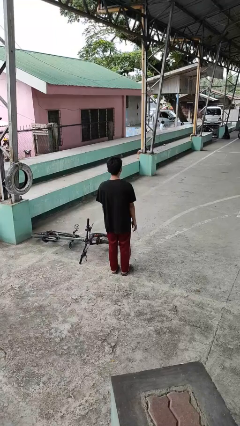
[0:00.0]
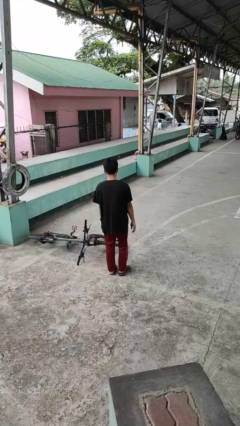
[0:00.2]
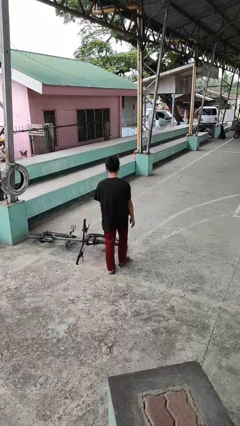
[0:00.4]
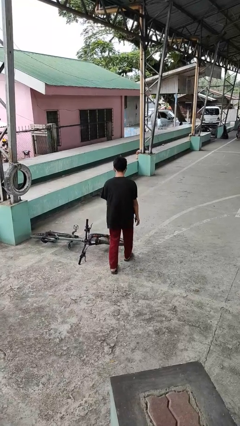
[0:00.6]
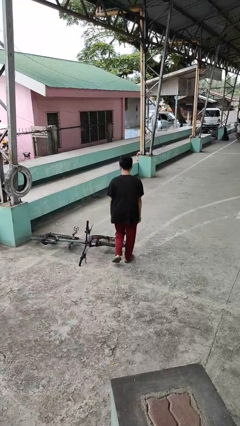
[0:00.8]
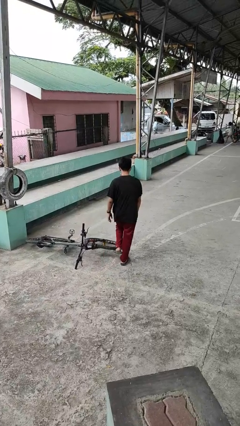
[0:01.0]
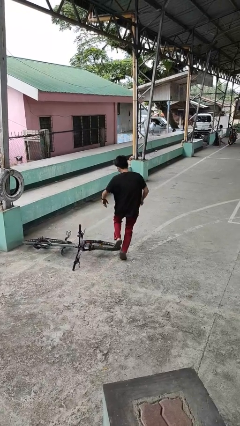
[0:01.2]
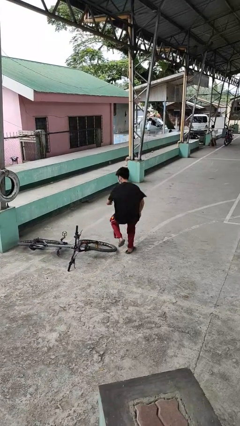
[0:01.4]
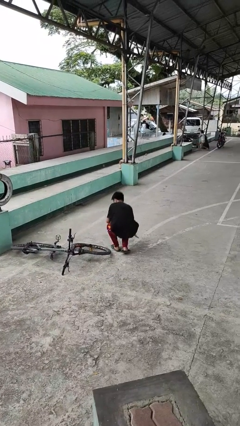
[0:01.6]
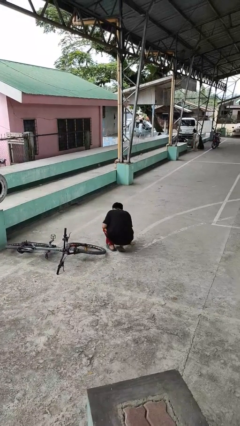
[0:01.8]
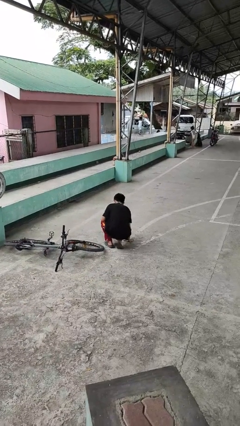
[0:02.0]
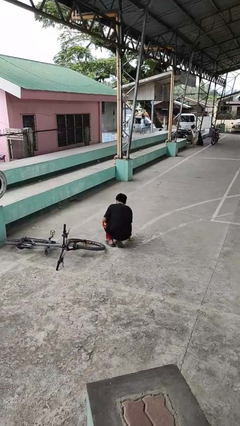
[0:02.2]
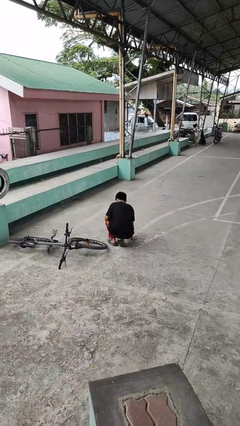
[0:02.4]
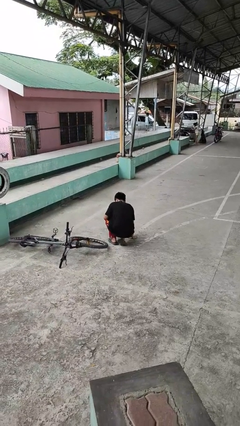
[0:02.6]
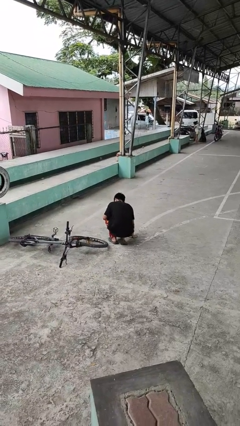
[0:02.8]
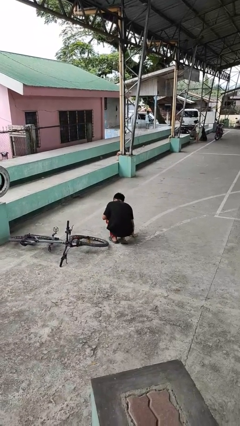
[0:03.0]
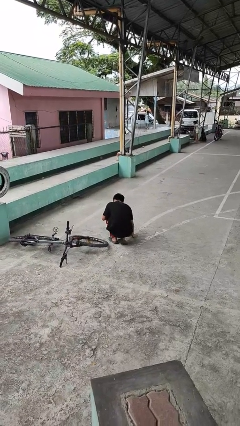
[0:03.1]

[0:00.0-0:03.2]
person trips on object on floor

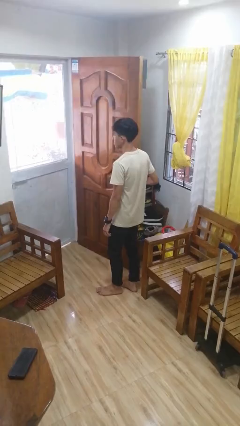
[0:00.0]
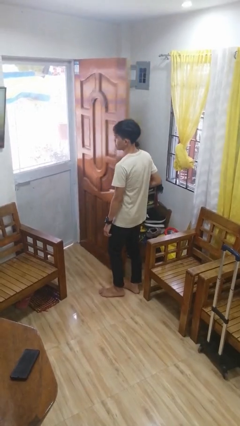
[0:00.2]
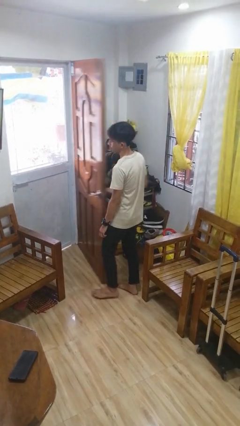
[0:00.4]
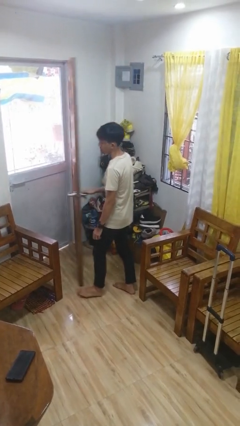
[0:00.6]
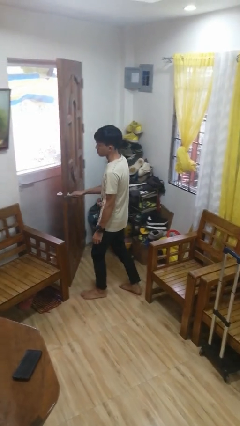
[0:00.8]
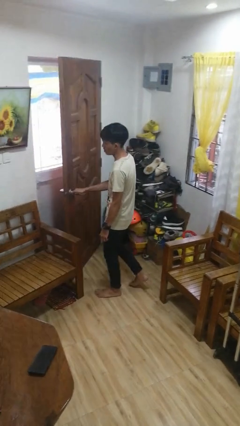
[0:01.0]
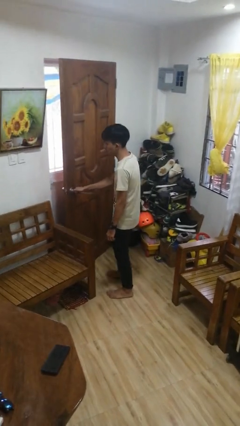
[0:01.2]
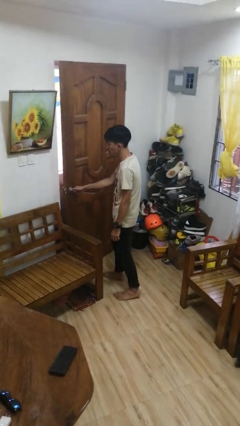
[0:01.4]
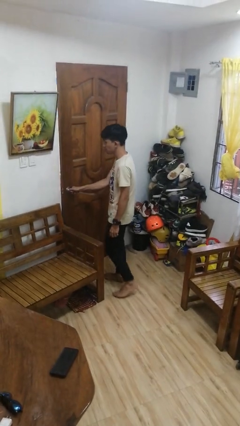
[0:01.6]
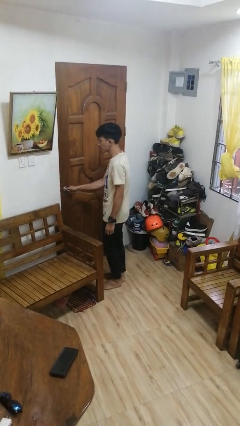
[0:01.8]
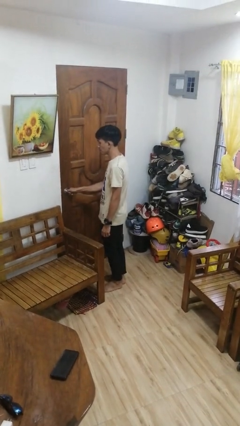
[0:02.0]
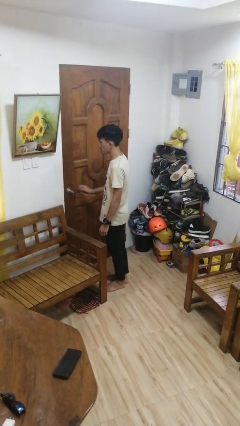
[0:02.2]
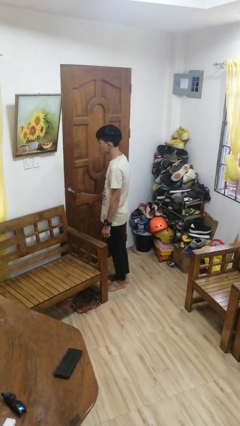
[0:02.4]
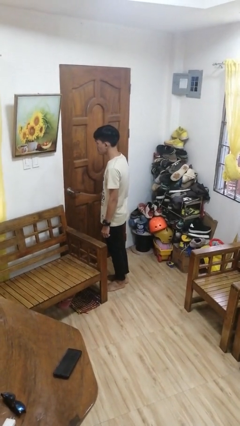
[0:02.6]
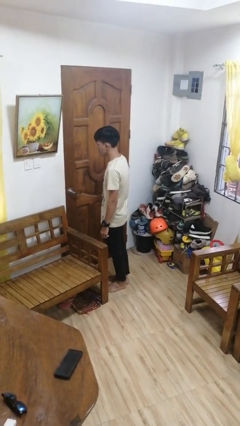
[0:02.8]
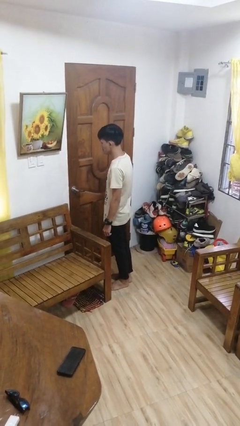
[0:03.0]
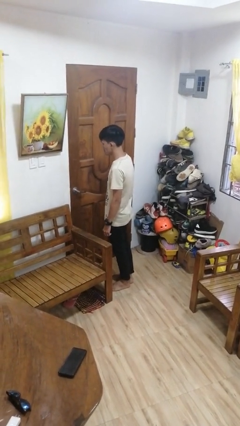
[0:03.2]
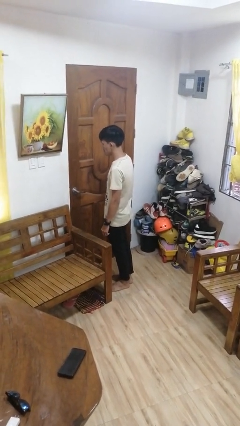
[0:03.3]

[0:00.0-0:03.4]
person closes facility door

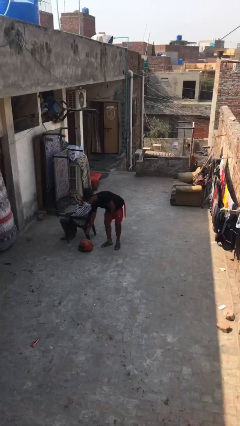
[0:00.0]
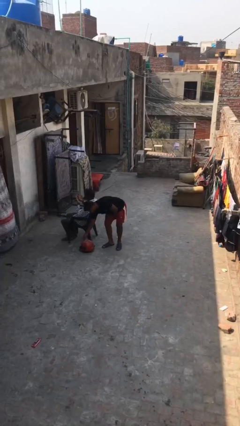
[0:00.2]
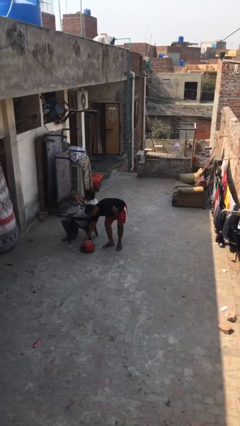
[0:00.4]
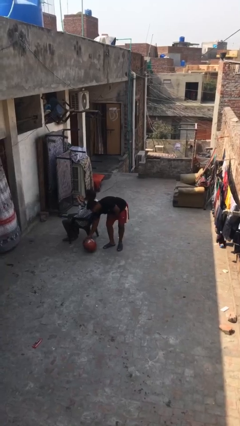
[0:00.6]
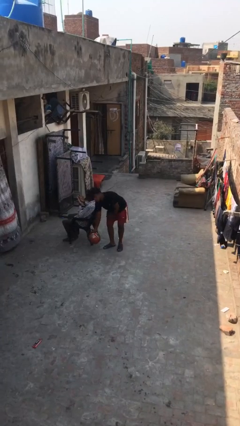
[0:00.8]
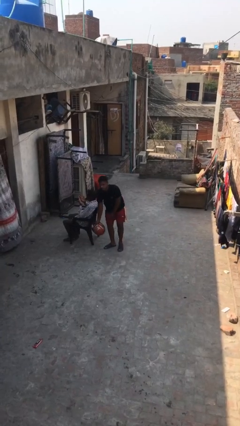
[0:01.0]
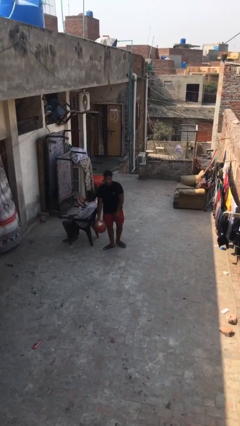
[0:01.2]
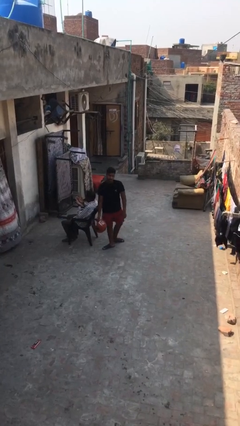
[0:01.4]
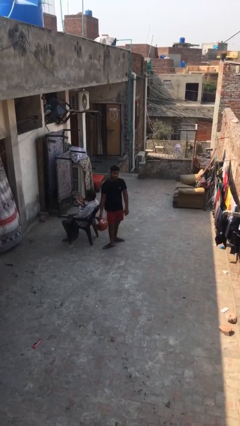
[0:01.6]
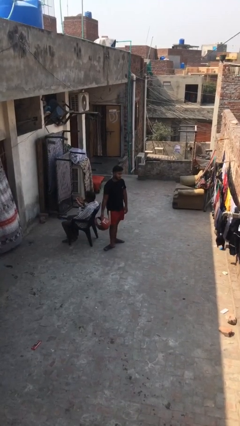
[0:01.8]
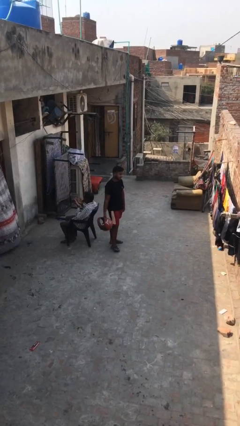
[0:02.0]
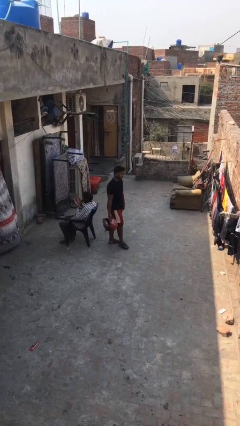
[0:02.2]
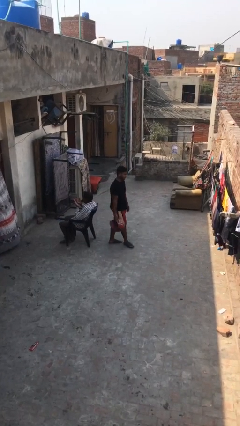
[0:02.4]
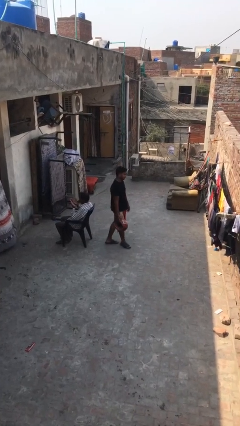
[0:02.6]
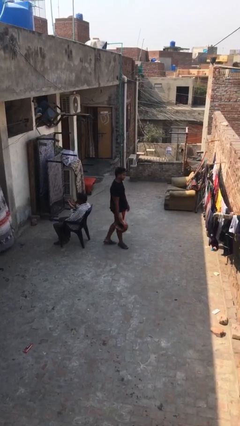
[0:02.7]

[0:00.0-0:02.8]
person steals object from person

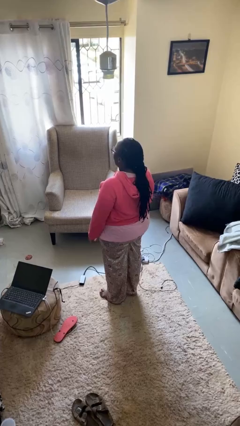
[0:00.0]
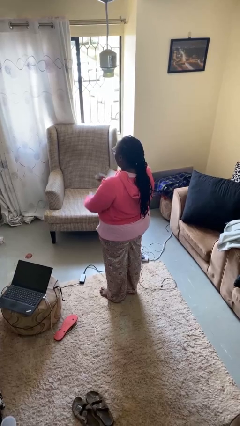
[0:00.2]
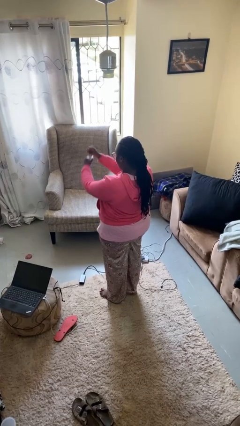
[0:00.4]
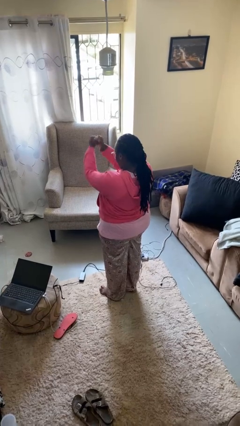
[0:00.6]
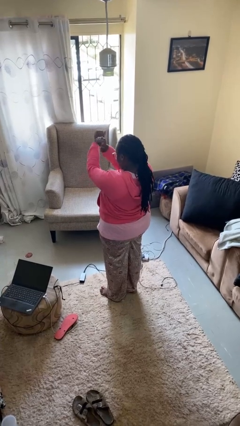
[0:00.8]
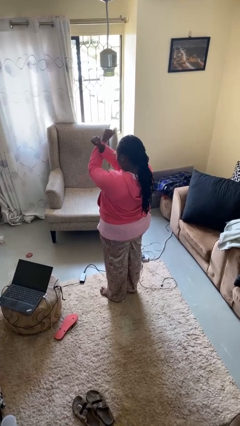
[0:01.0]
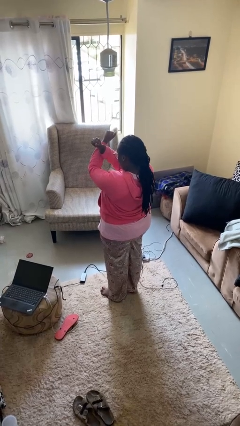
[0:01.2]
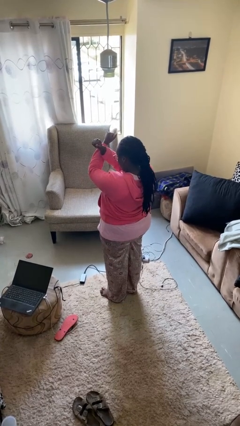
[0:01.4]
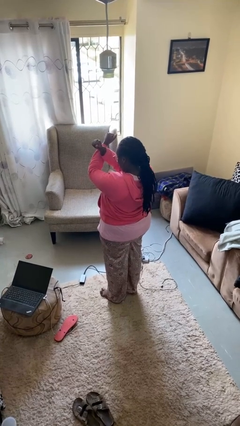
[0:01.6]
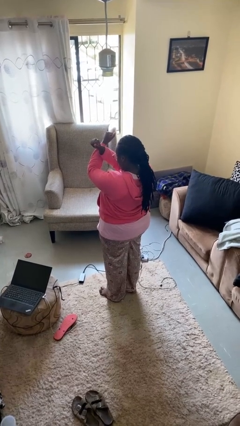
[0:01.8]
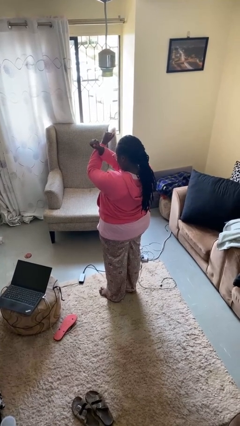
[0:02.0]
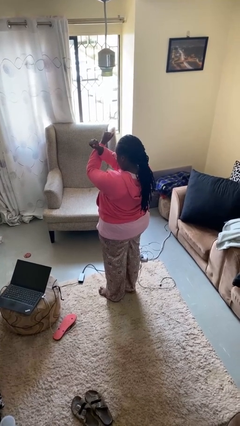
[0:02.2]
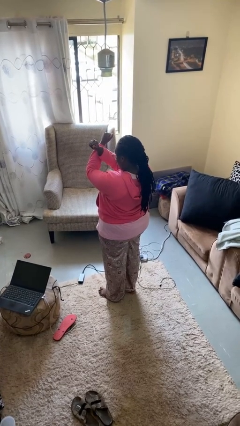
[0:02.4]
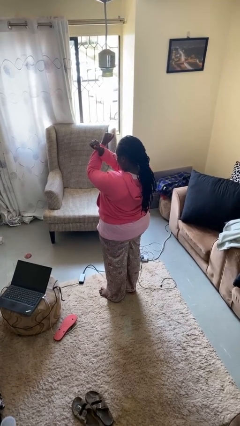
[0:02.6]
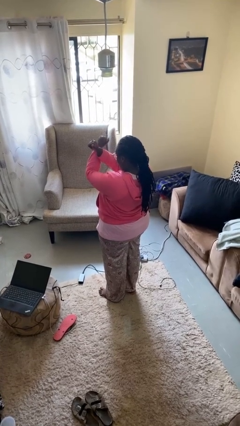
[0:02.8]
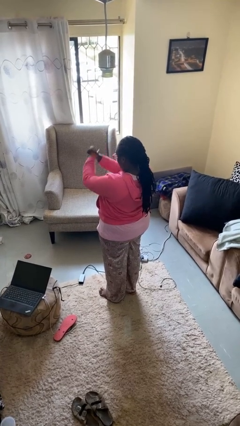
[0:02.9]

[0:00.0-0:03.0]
person gestures arms x

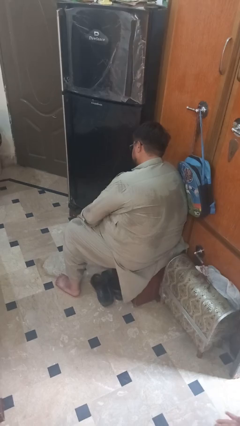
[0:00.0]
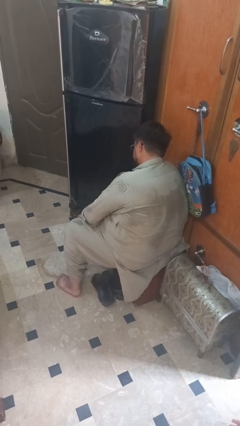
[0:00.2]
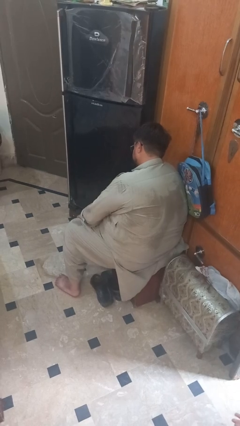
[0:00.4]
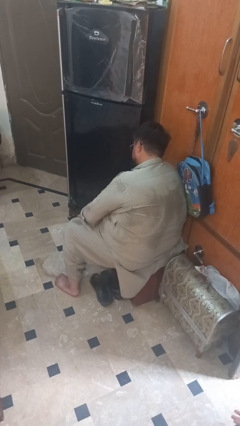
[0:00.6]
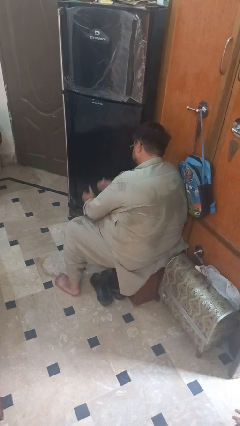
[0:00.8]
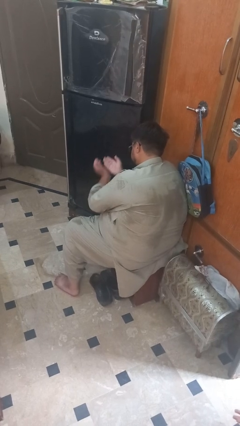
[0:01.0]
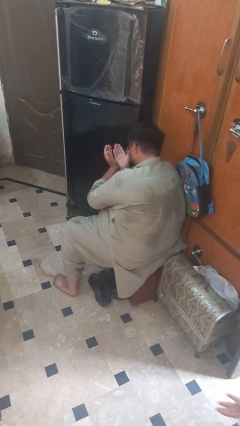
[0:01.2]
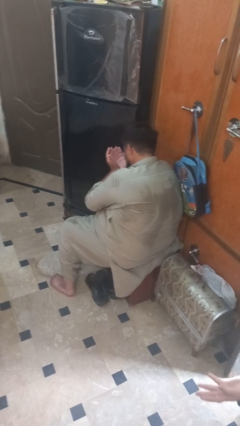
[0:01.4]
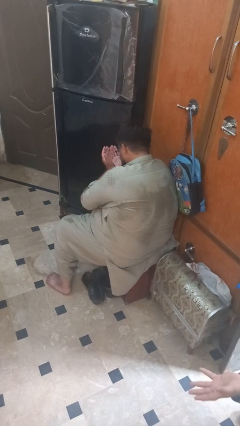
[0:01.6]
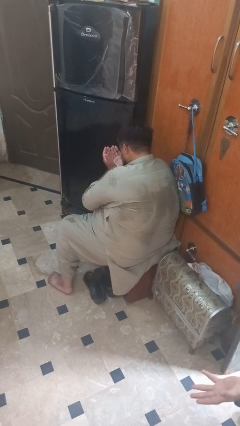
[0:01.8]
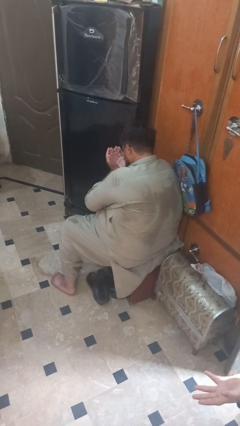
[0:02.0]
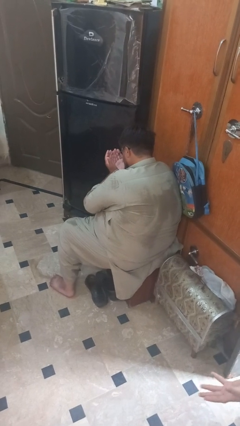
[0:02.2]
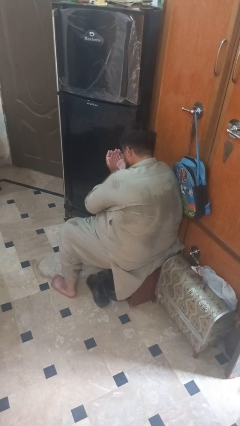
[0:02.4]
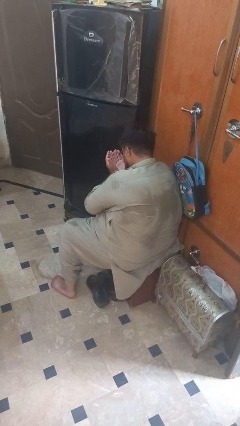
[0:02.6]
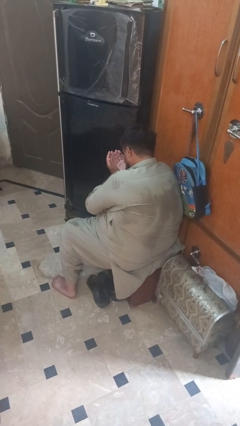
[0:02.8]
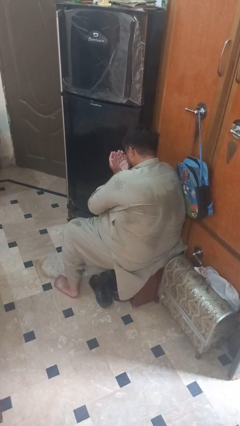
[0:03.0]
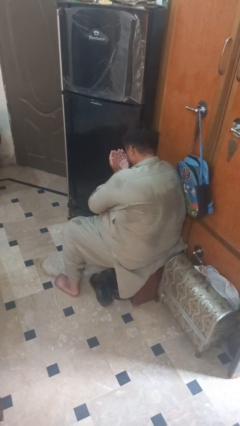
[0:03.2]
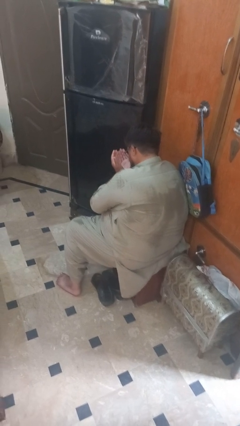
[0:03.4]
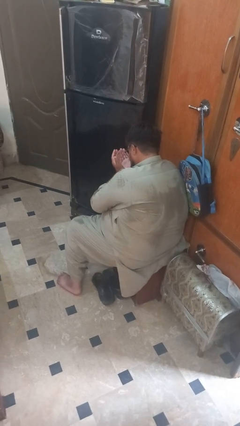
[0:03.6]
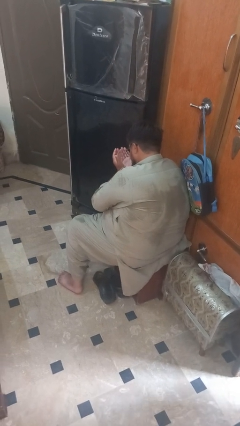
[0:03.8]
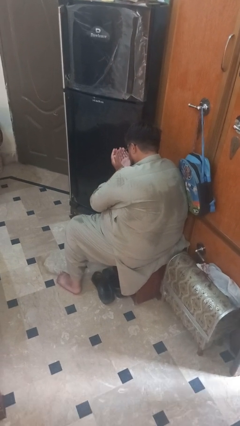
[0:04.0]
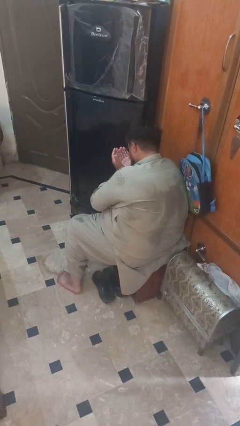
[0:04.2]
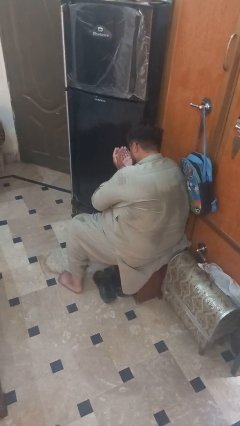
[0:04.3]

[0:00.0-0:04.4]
person prays

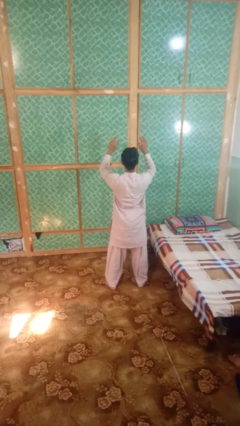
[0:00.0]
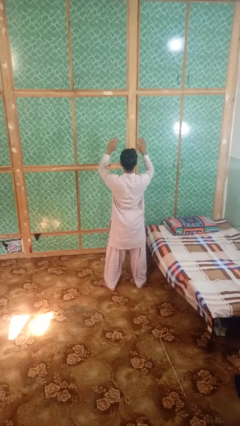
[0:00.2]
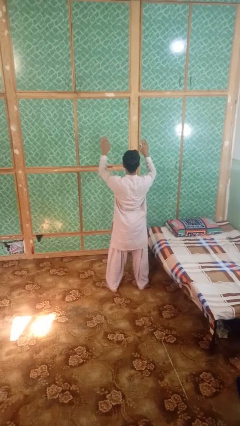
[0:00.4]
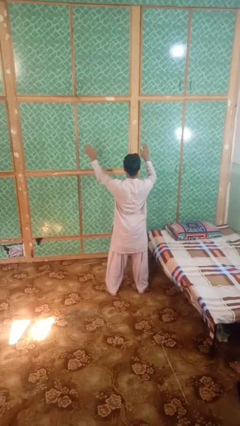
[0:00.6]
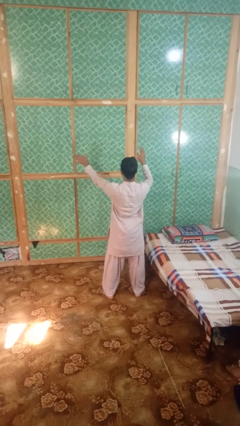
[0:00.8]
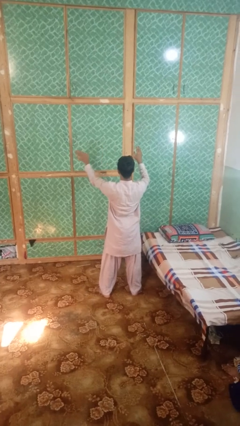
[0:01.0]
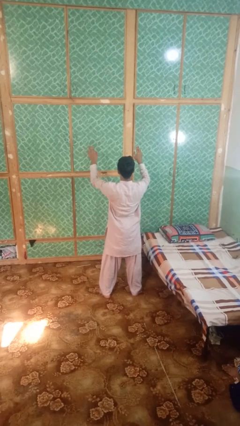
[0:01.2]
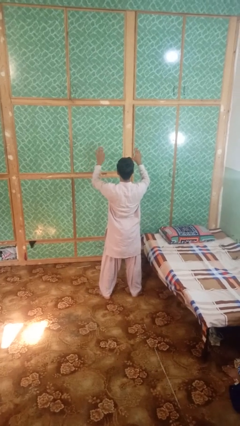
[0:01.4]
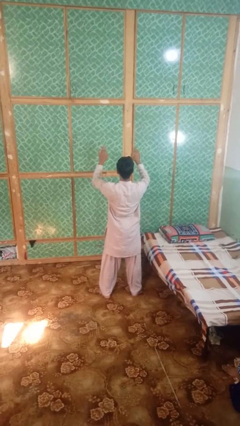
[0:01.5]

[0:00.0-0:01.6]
person gestures swipe left
